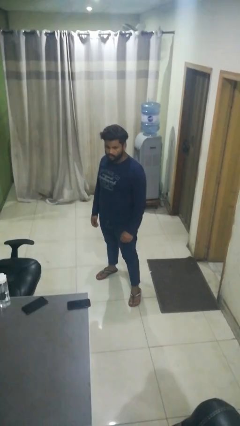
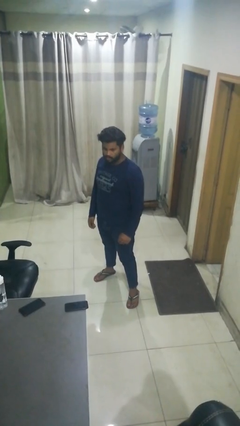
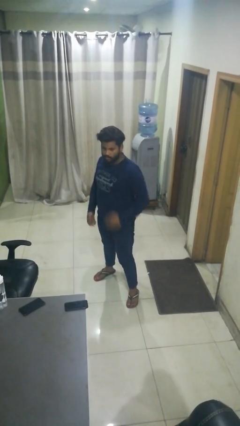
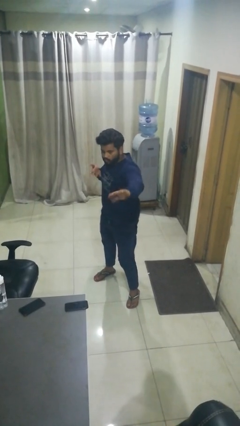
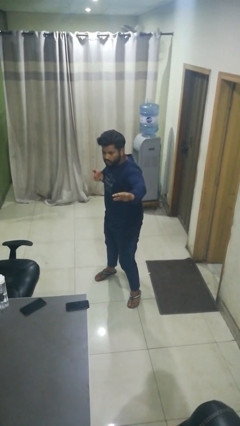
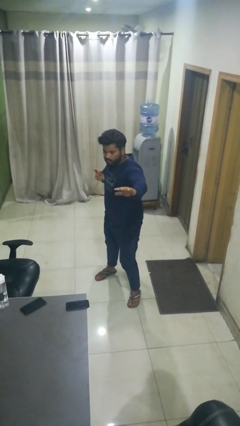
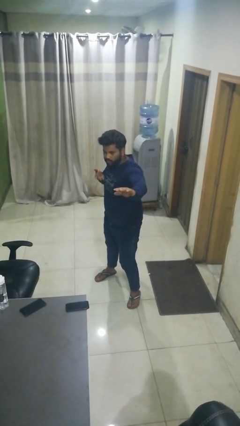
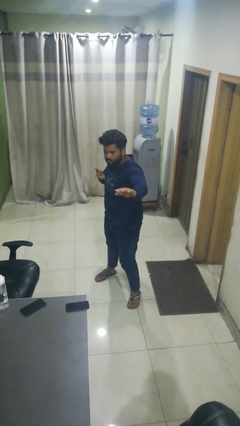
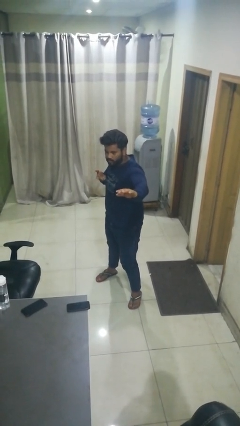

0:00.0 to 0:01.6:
person karate chop

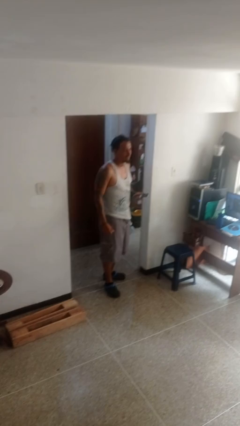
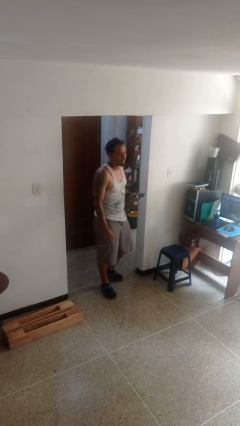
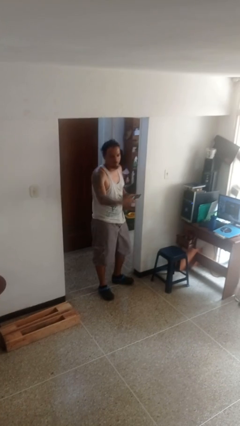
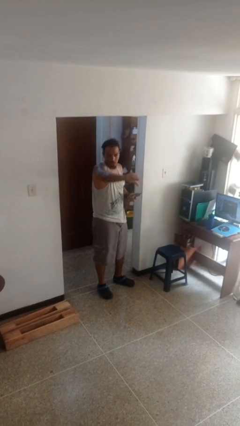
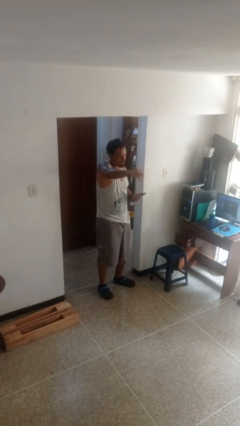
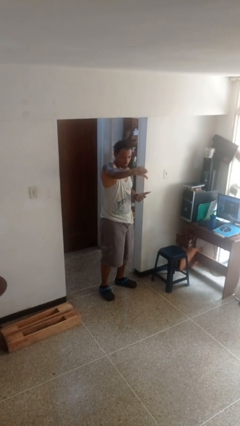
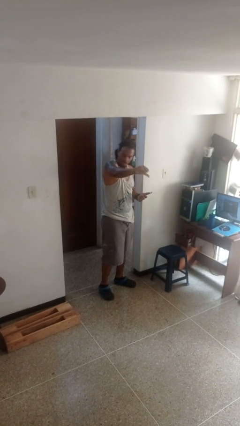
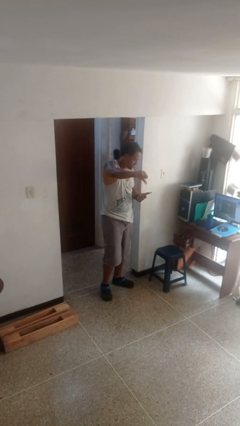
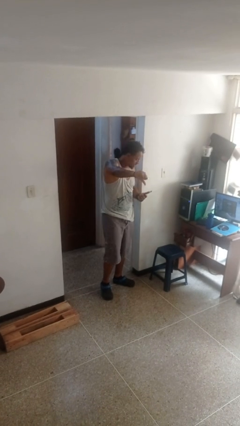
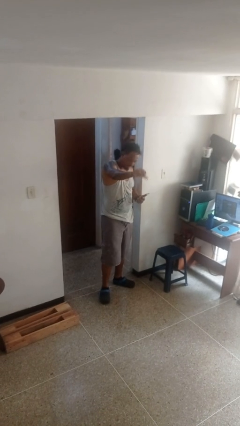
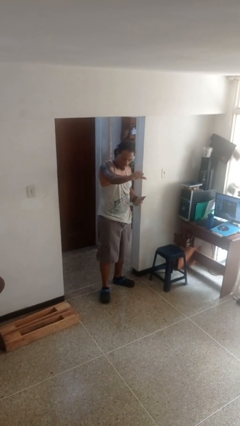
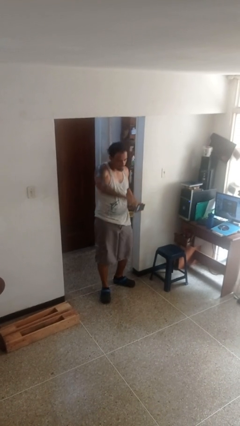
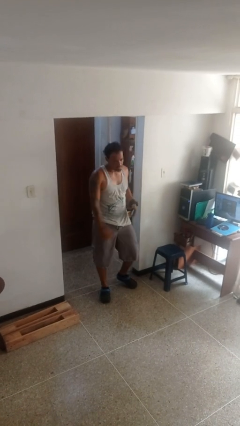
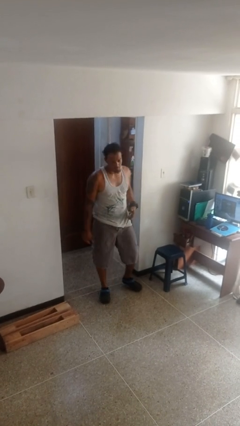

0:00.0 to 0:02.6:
person gestures thumbs down

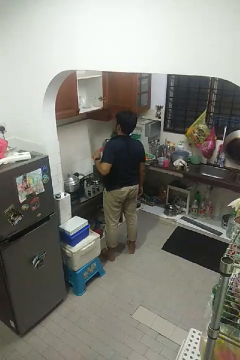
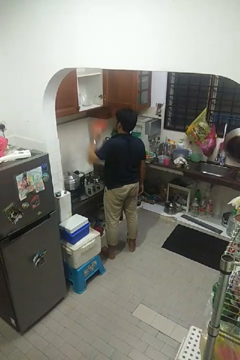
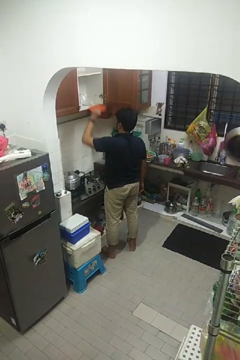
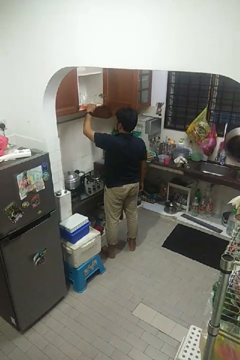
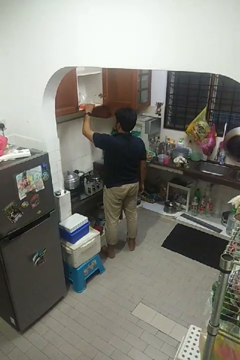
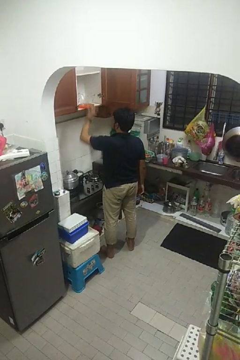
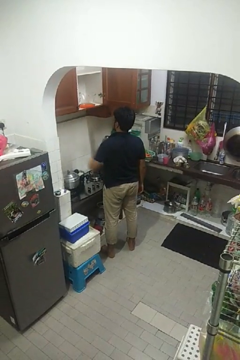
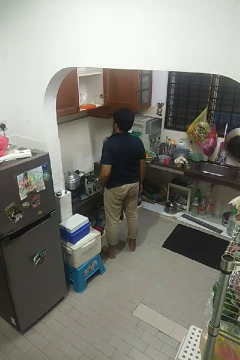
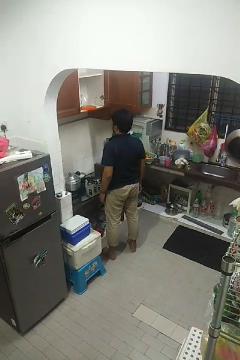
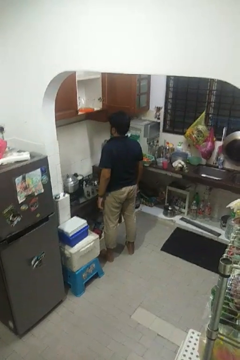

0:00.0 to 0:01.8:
person puts object in cabinet

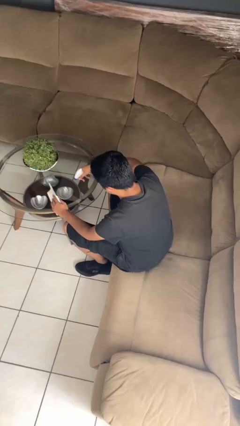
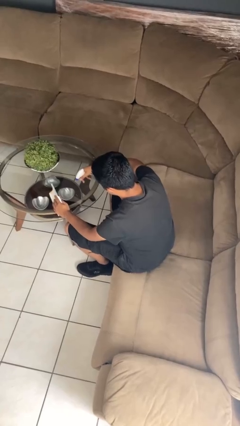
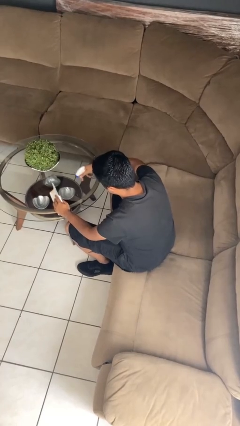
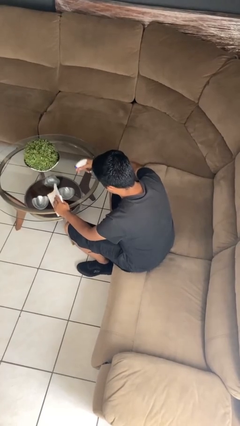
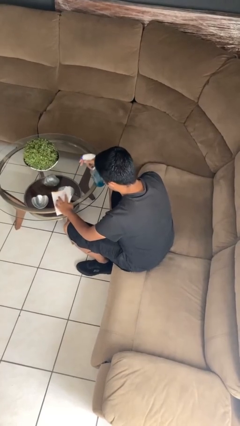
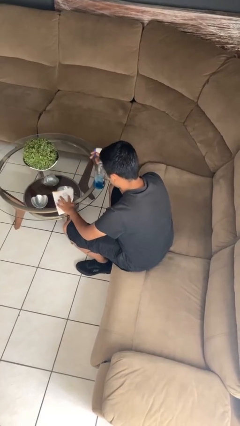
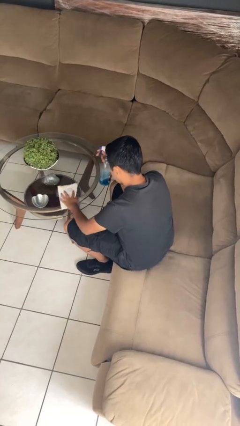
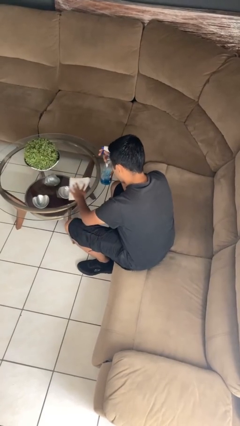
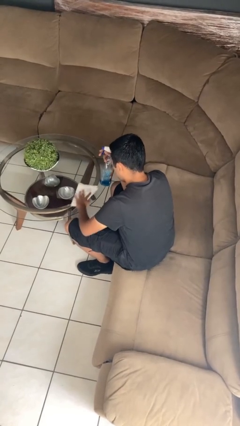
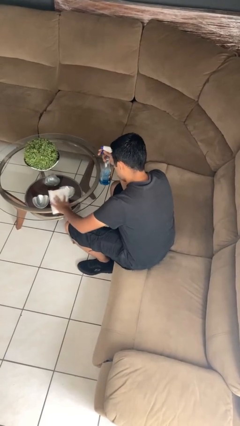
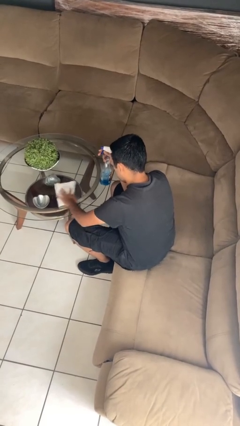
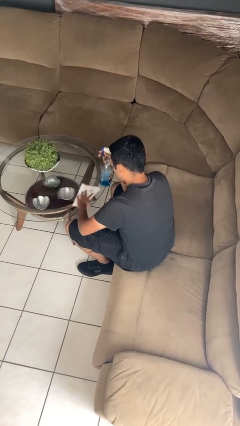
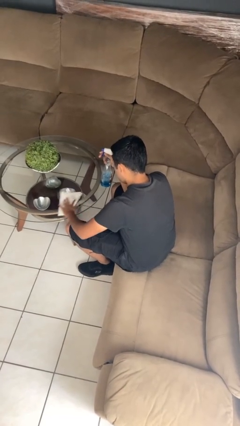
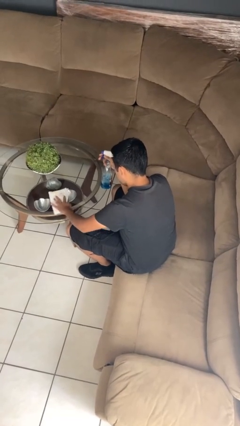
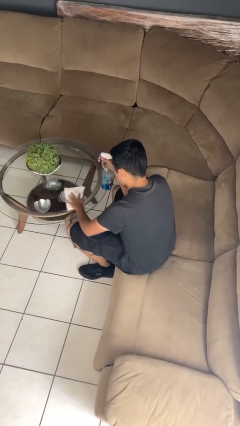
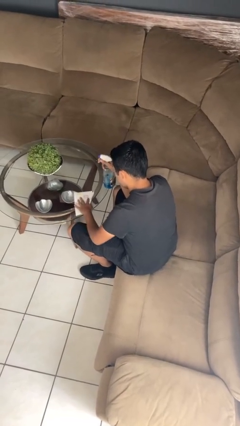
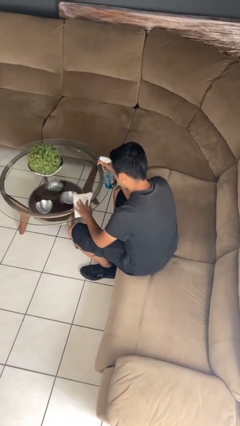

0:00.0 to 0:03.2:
person cleans table with rag

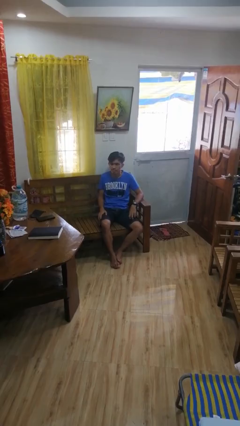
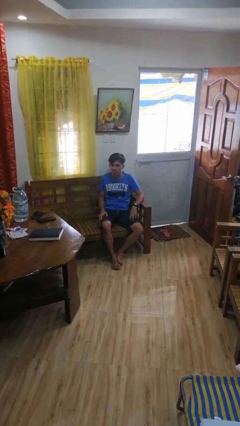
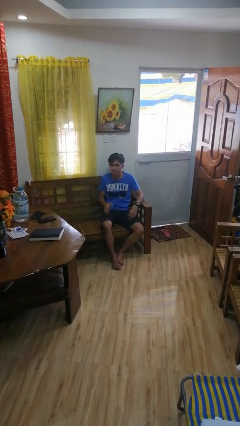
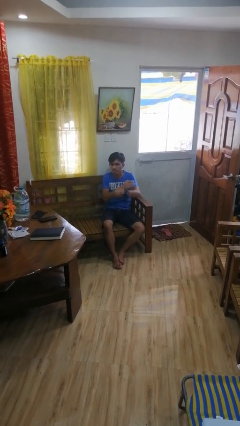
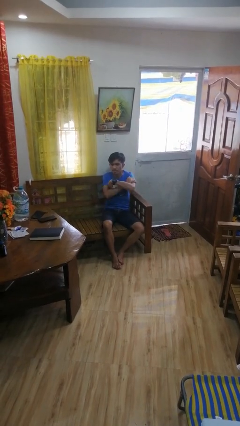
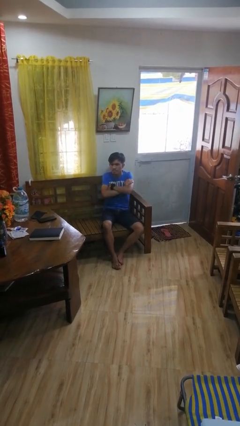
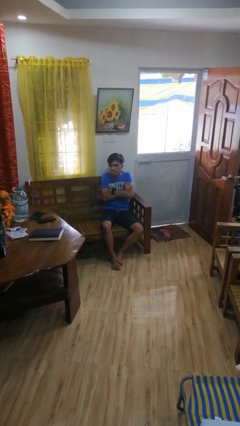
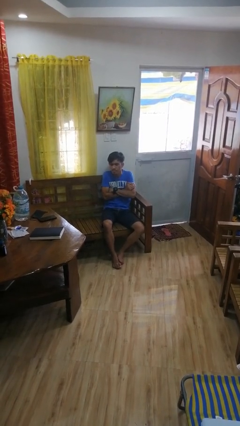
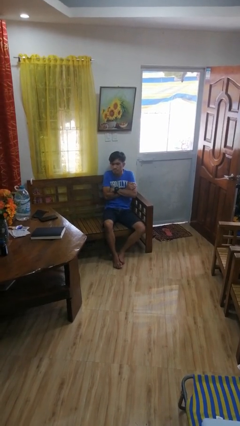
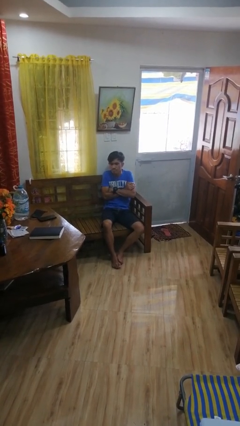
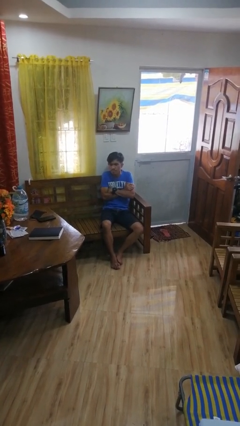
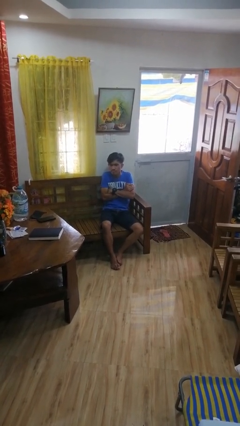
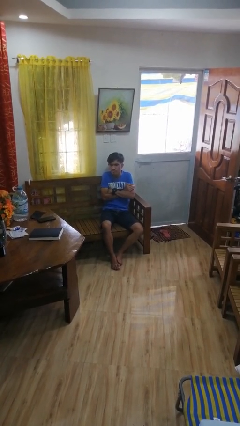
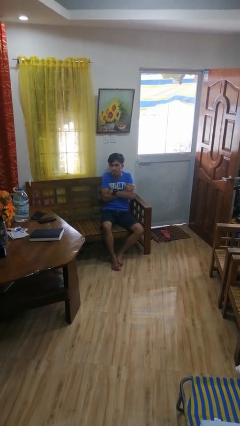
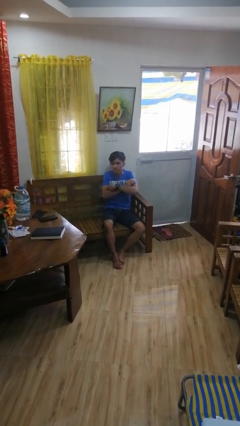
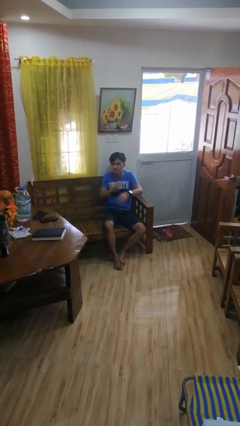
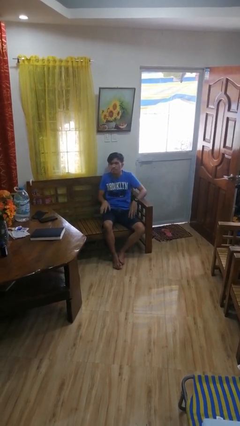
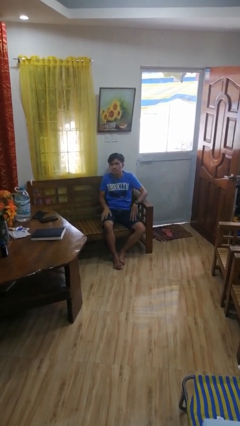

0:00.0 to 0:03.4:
person crosses arms

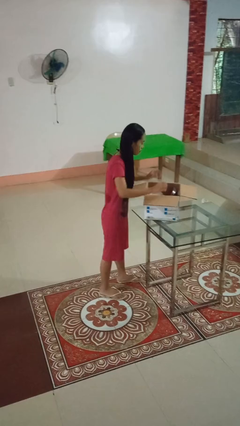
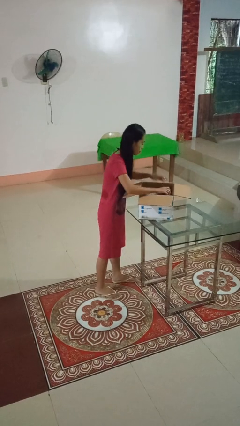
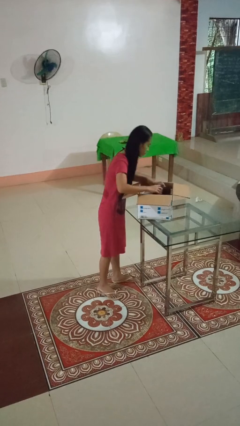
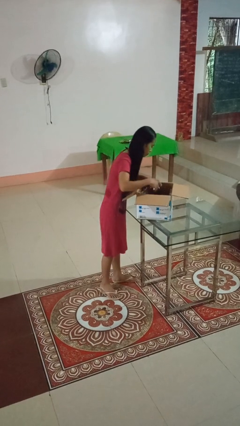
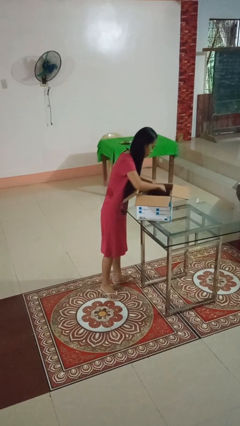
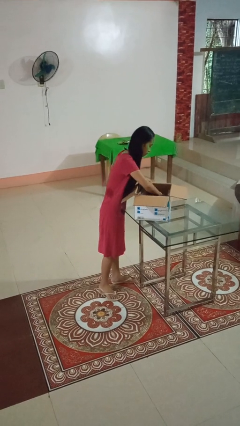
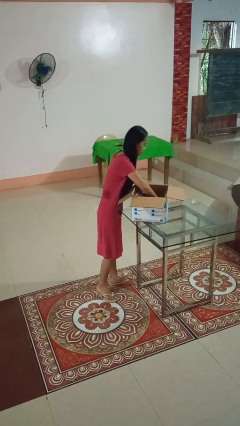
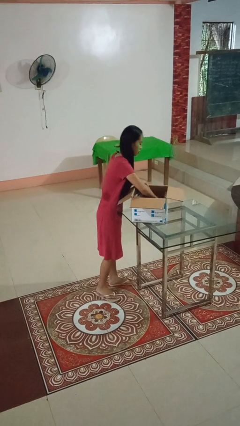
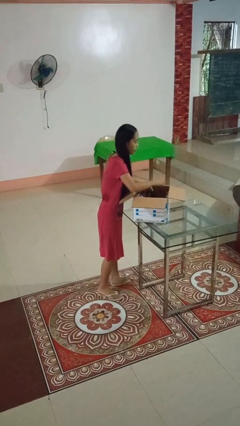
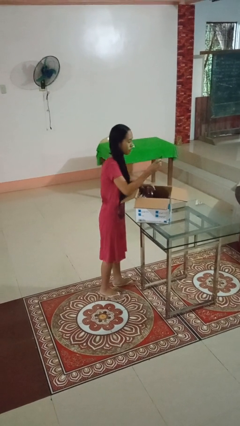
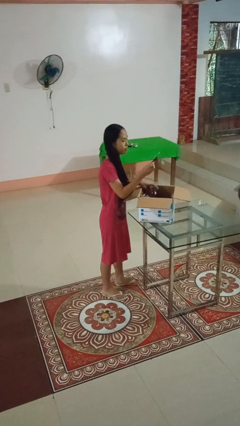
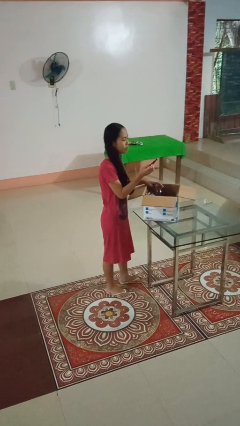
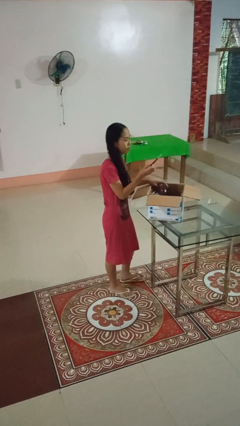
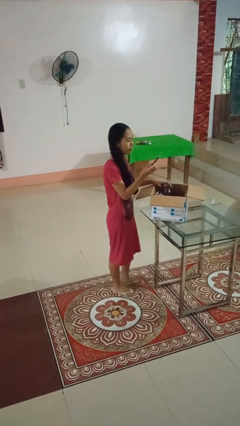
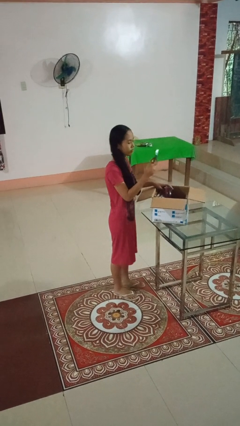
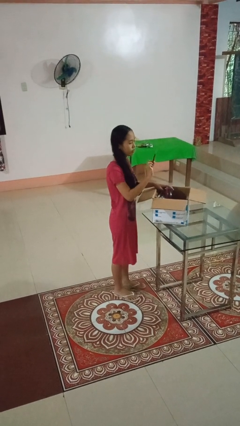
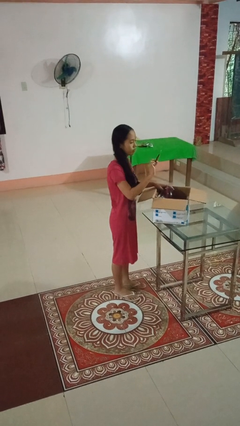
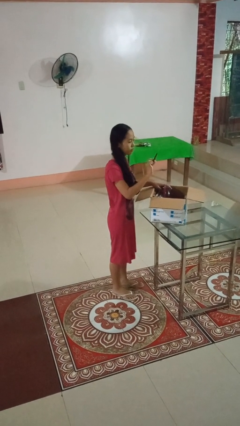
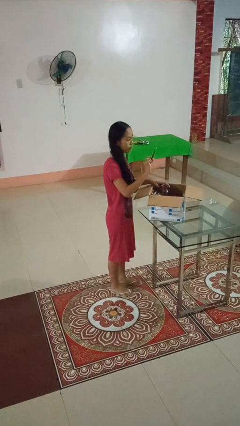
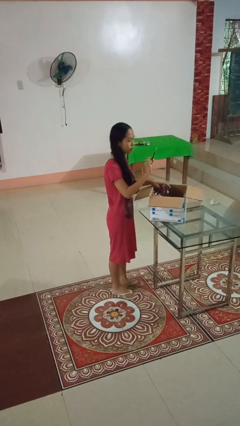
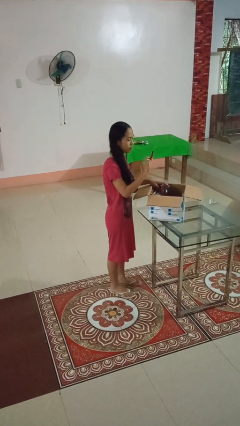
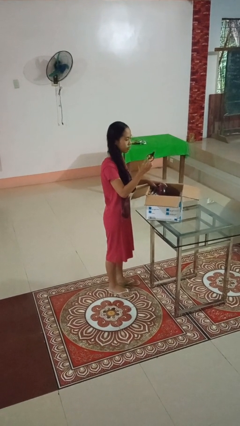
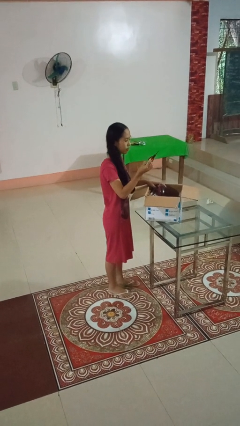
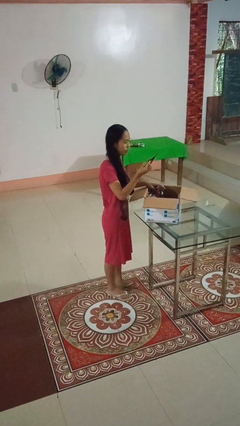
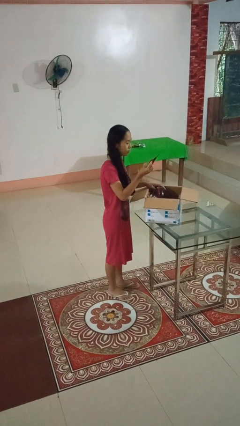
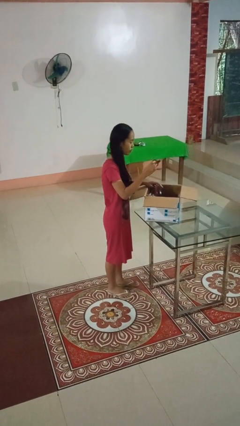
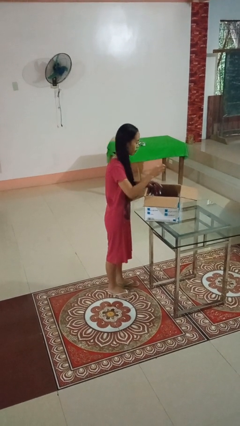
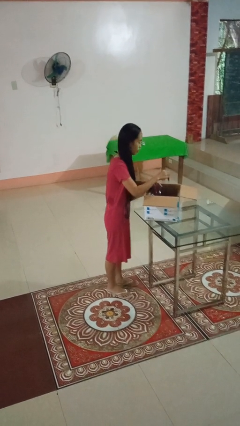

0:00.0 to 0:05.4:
person takes object from box
